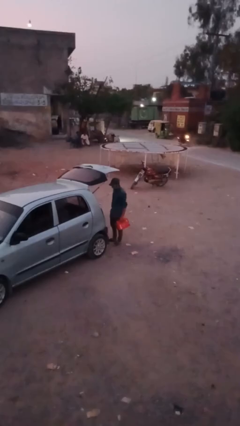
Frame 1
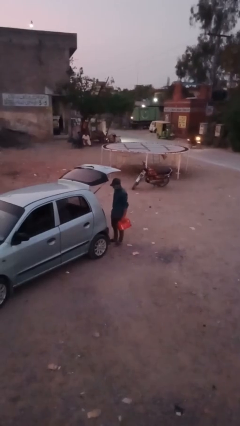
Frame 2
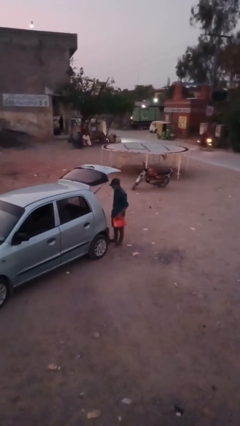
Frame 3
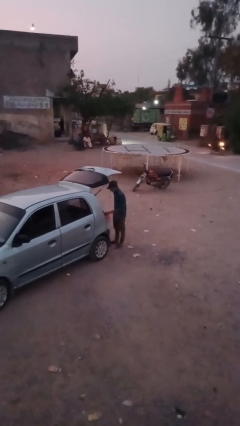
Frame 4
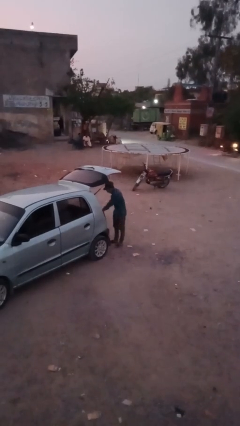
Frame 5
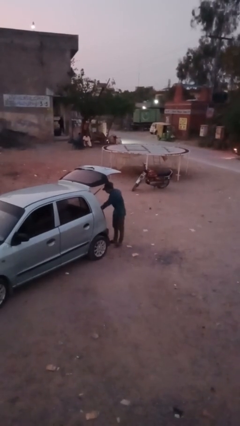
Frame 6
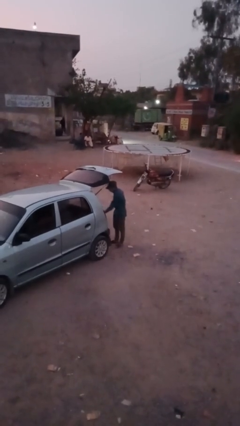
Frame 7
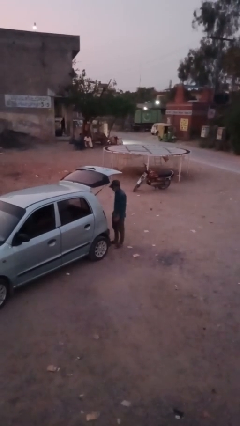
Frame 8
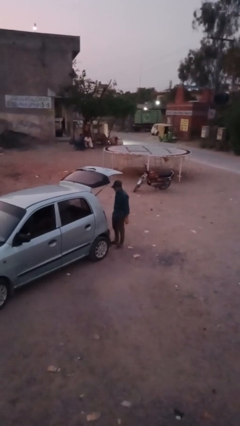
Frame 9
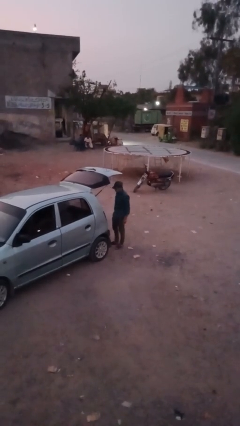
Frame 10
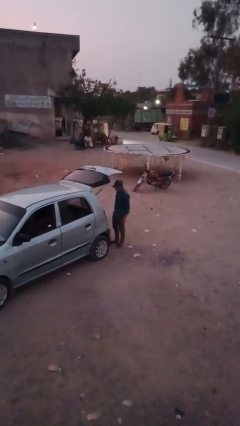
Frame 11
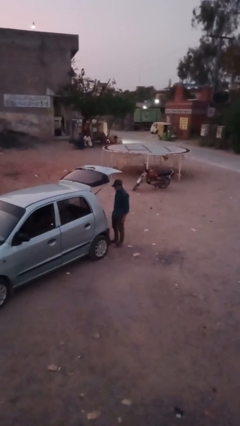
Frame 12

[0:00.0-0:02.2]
person loads car

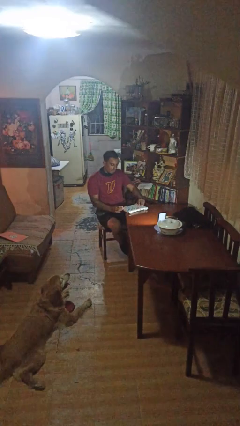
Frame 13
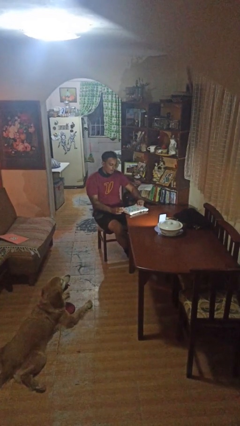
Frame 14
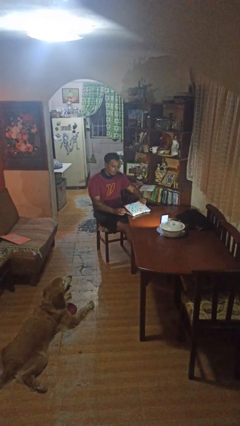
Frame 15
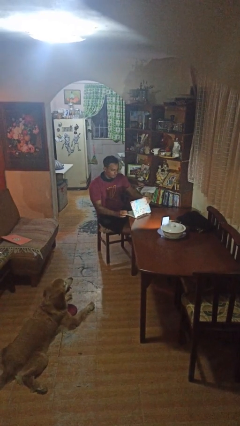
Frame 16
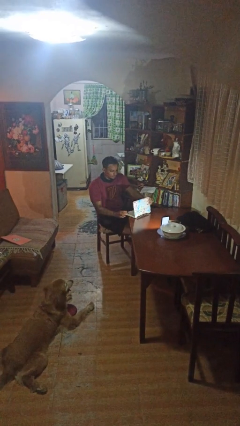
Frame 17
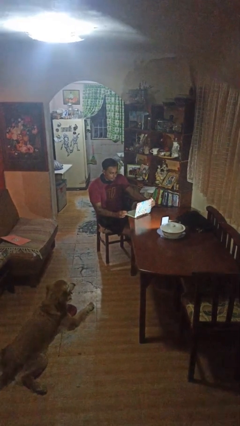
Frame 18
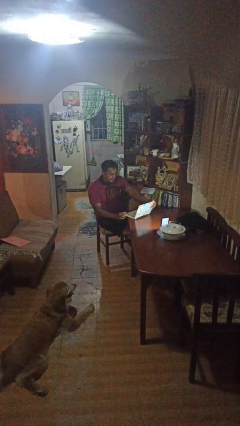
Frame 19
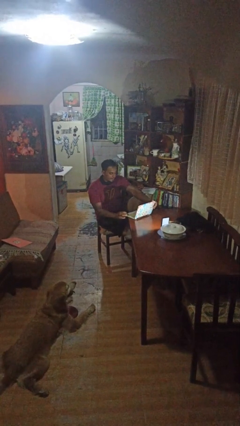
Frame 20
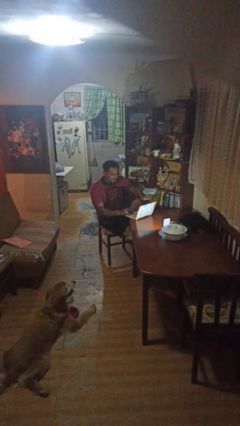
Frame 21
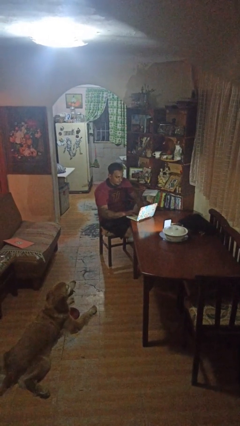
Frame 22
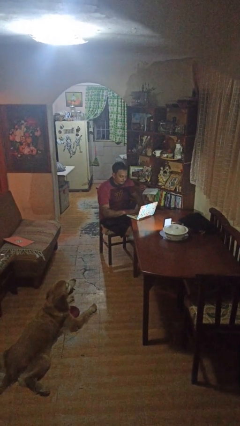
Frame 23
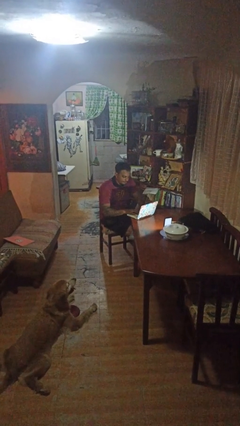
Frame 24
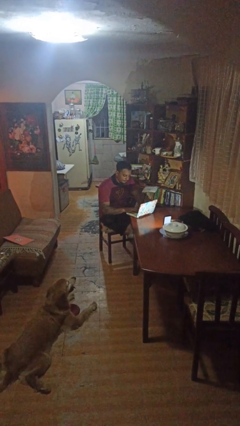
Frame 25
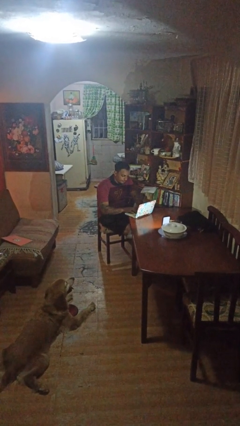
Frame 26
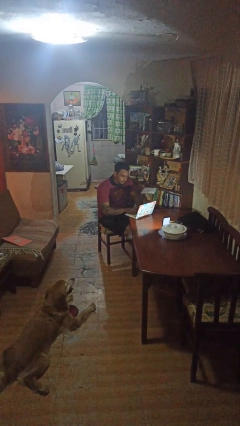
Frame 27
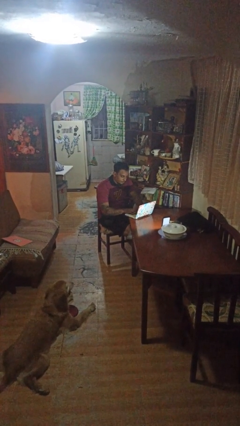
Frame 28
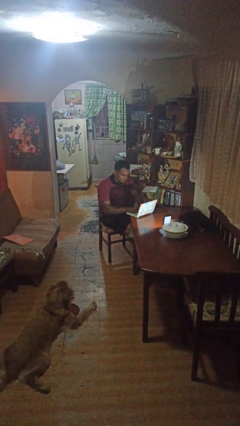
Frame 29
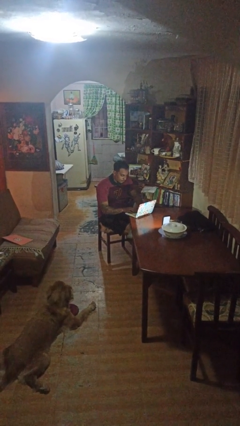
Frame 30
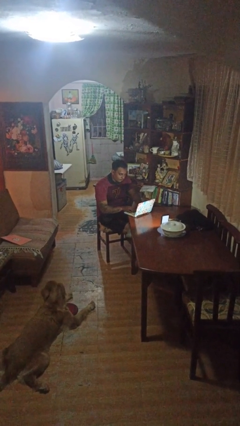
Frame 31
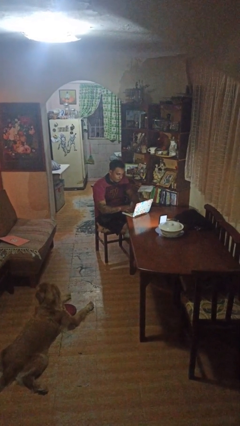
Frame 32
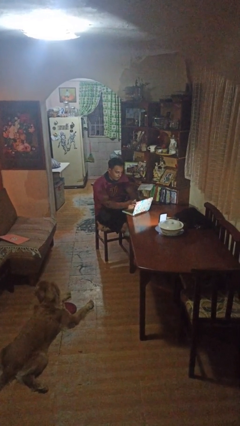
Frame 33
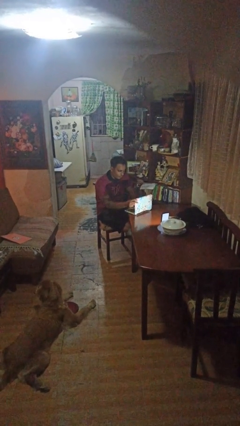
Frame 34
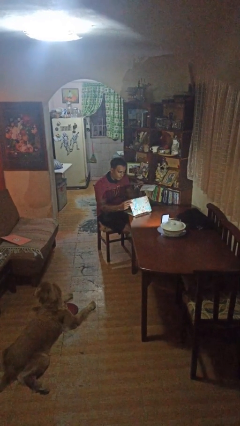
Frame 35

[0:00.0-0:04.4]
person interacts with laptop

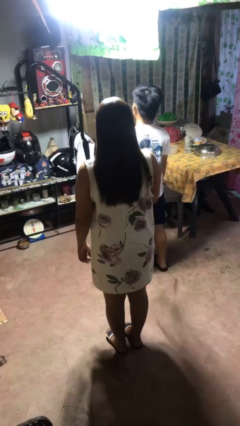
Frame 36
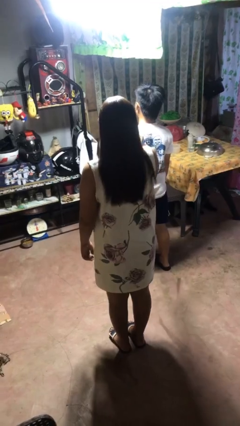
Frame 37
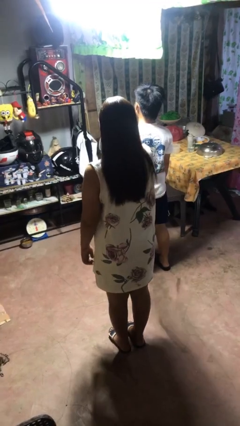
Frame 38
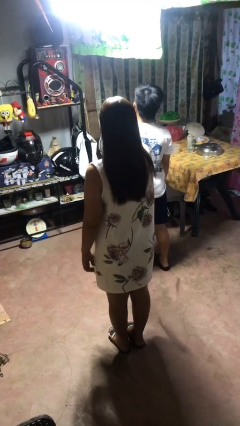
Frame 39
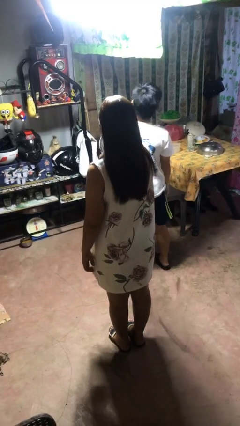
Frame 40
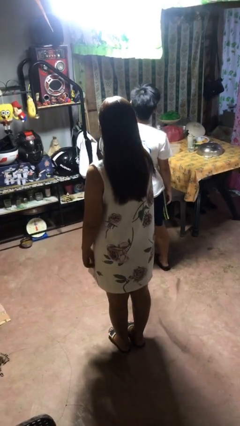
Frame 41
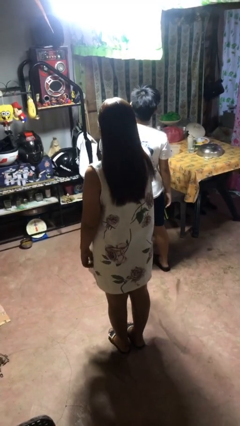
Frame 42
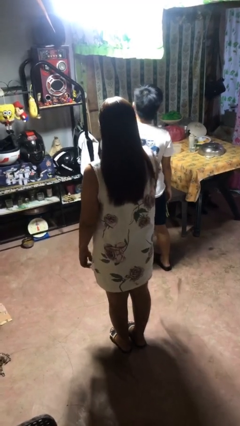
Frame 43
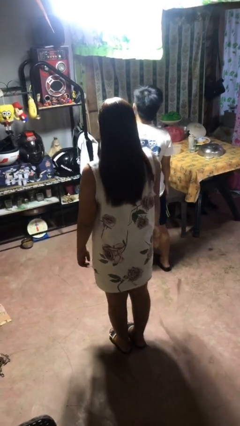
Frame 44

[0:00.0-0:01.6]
person shoves person

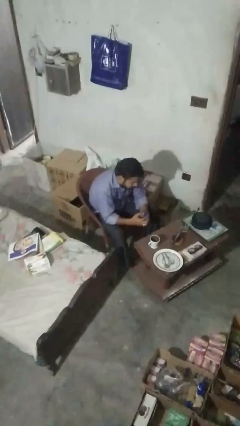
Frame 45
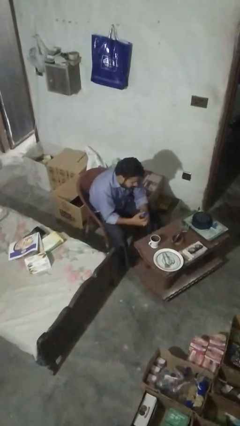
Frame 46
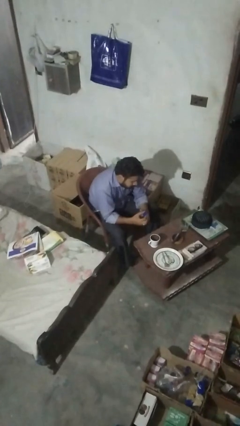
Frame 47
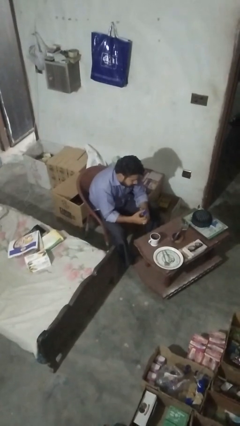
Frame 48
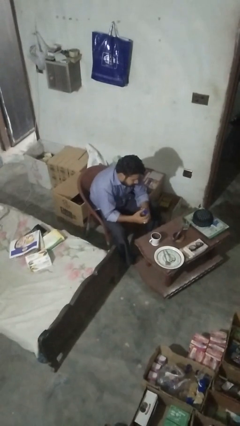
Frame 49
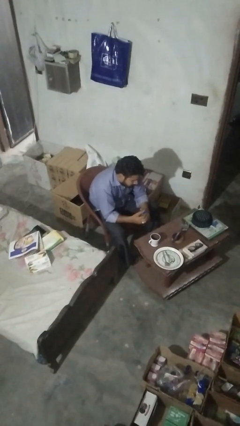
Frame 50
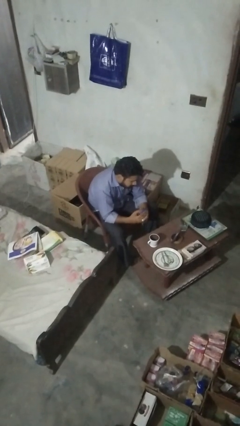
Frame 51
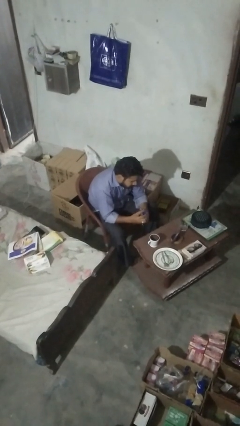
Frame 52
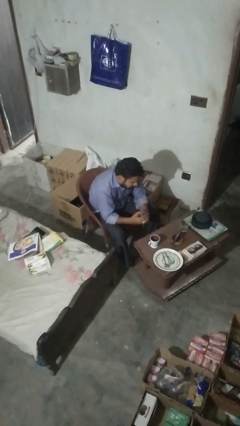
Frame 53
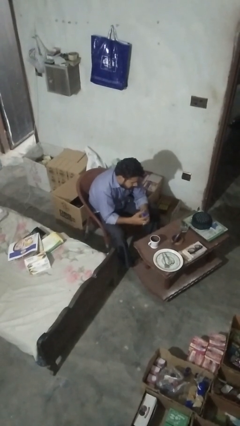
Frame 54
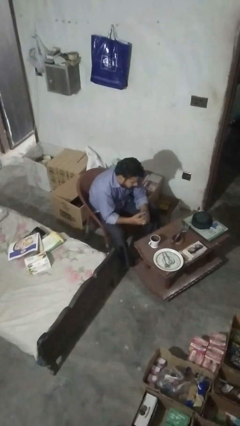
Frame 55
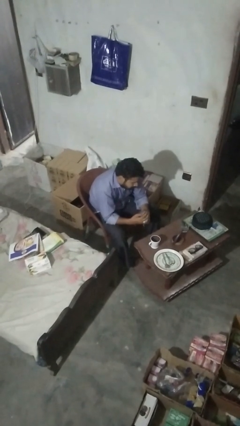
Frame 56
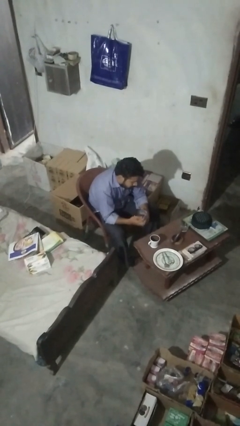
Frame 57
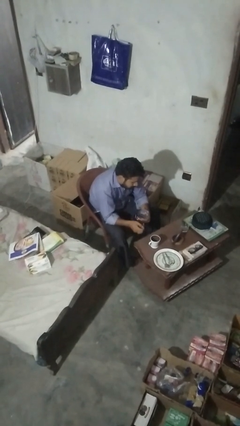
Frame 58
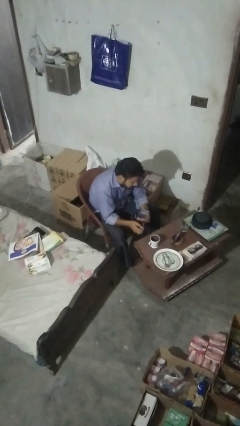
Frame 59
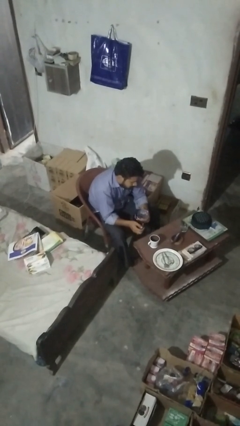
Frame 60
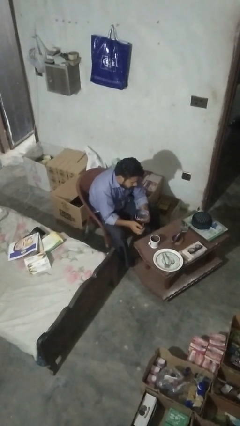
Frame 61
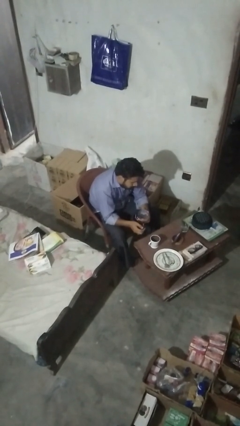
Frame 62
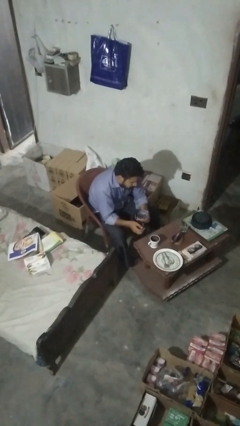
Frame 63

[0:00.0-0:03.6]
person unscrews lid from bottle

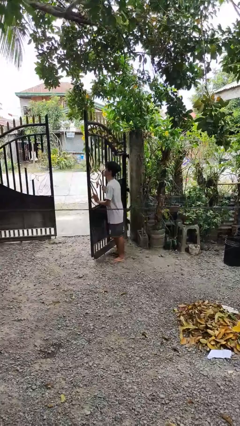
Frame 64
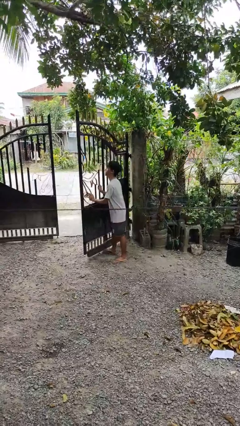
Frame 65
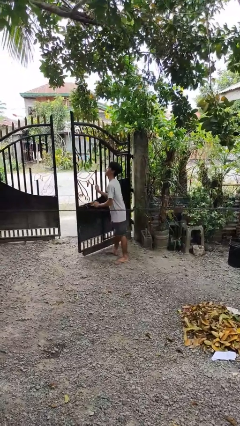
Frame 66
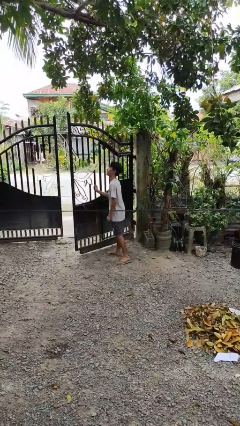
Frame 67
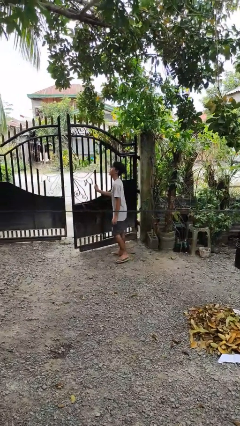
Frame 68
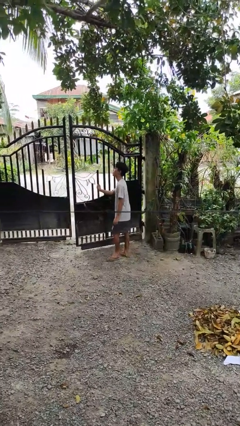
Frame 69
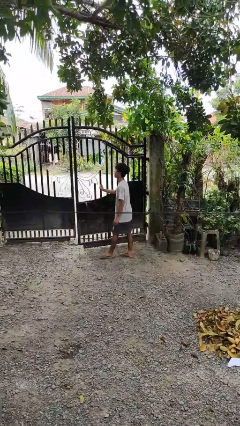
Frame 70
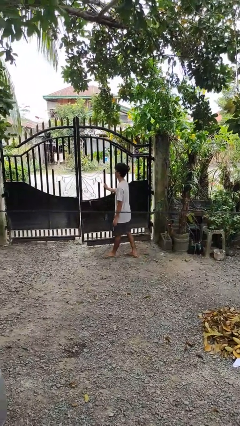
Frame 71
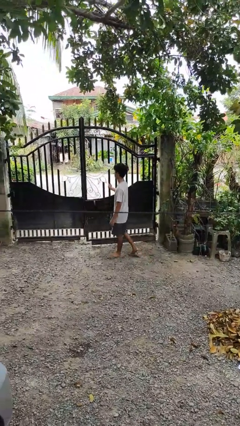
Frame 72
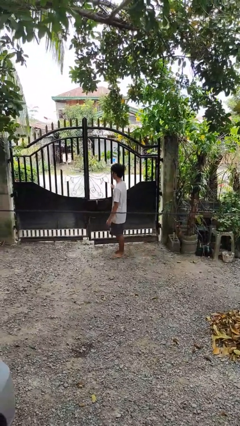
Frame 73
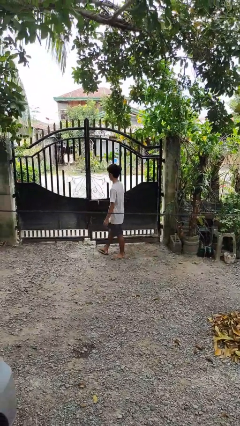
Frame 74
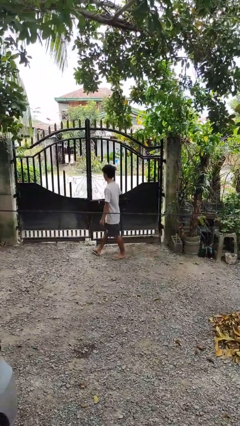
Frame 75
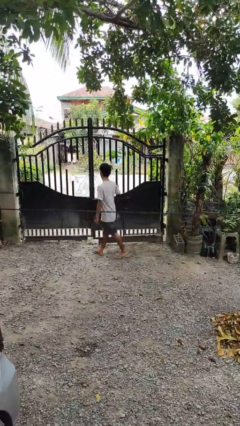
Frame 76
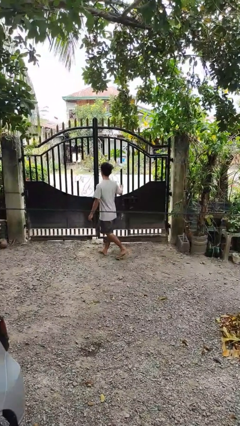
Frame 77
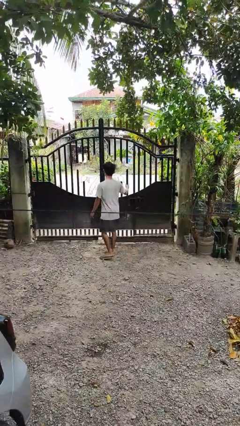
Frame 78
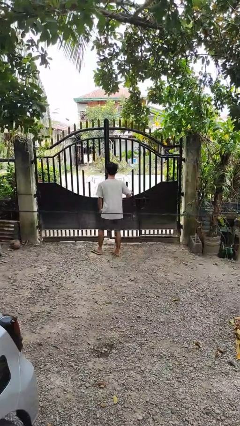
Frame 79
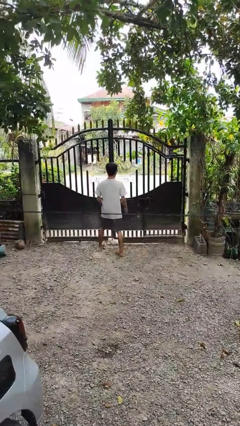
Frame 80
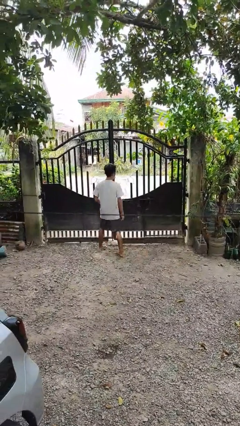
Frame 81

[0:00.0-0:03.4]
person closes gate

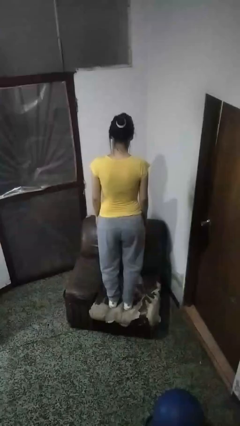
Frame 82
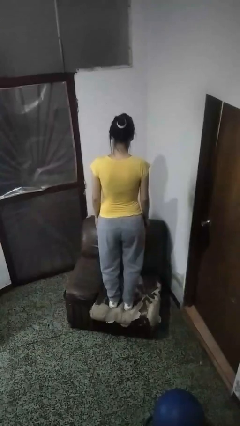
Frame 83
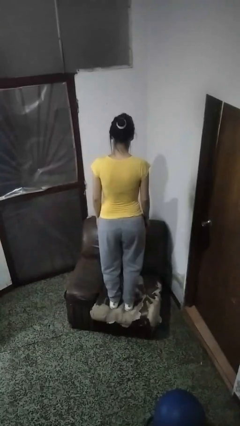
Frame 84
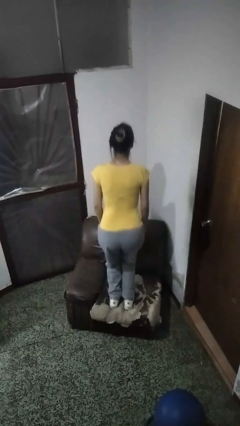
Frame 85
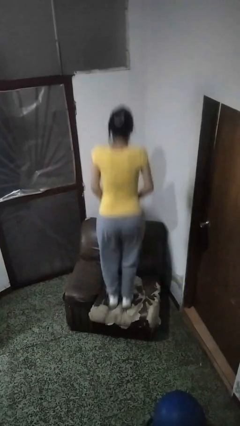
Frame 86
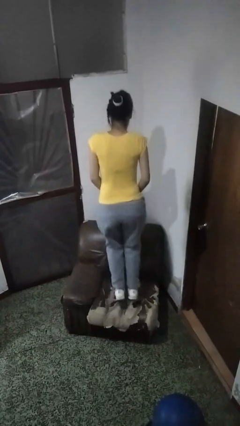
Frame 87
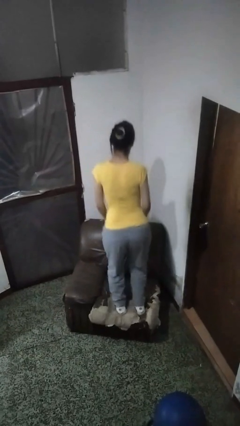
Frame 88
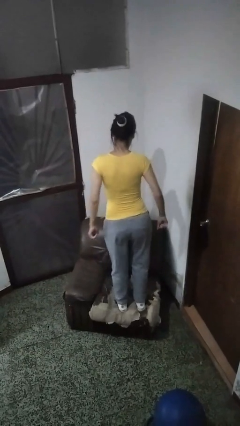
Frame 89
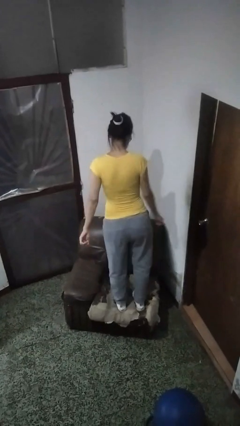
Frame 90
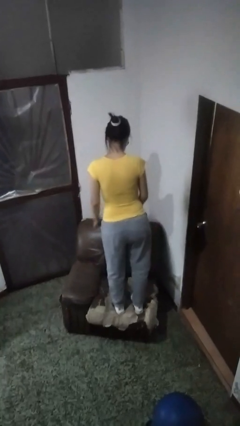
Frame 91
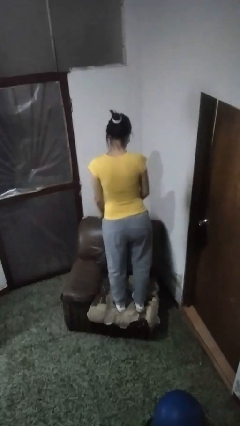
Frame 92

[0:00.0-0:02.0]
person jumps on couch

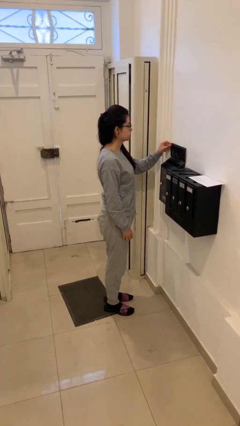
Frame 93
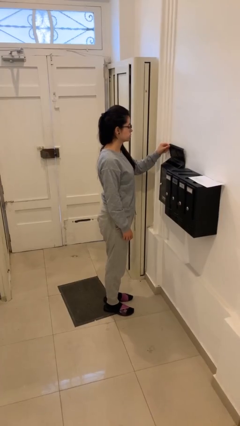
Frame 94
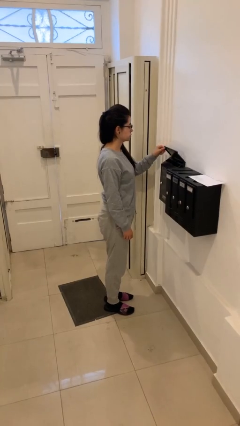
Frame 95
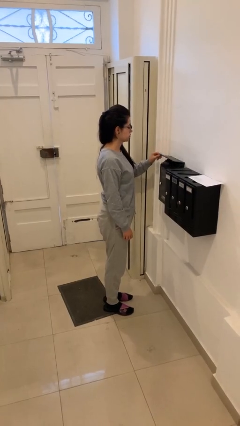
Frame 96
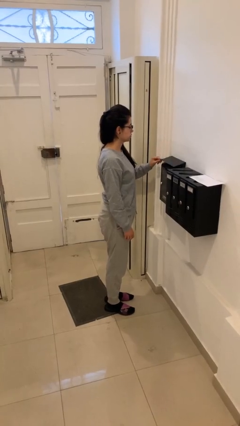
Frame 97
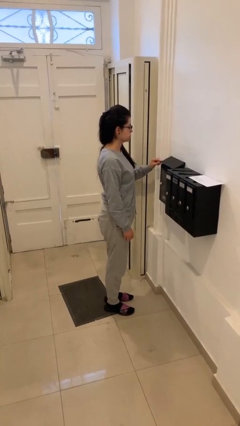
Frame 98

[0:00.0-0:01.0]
person closes mailbox
